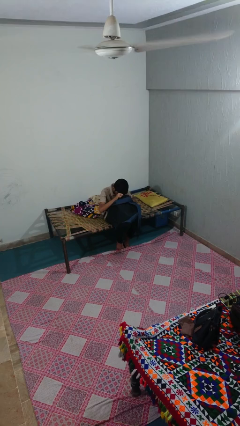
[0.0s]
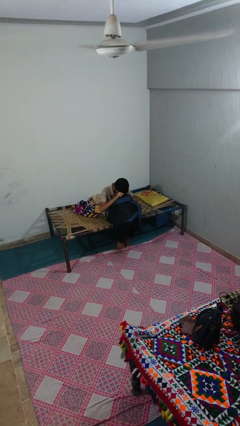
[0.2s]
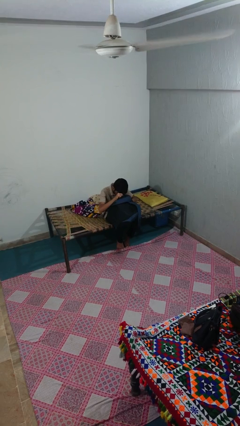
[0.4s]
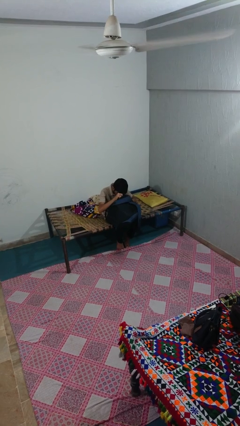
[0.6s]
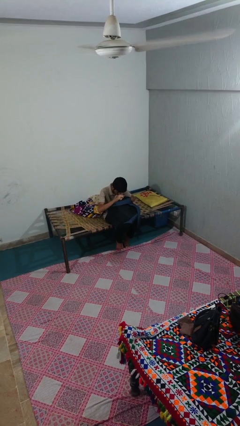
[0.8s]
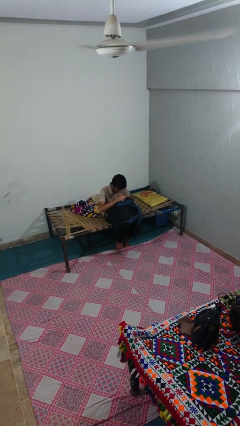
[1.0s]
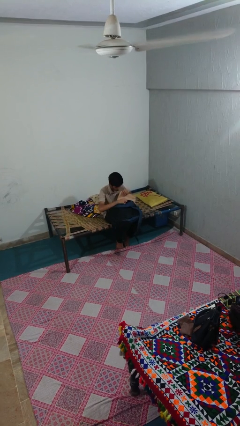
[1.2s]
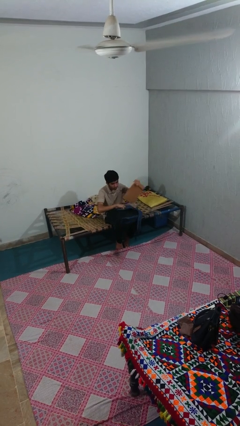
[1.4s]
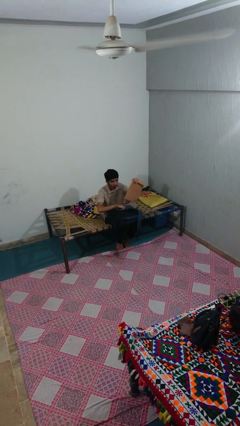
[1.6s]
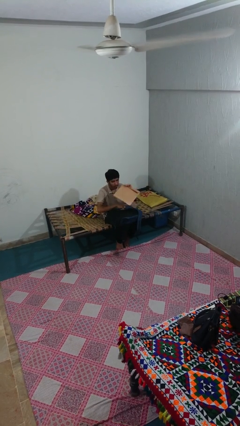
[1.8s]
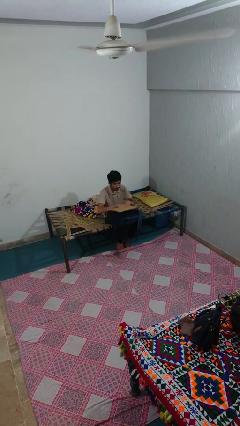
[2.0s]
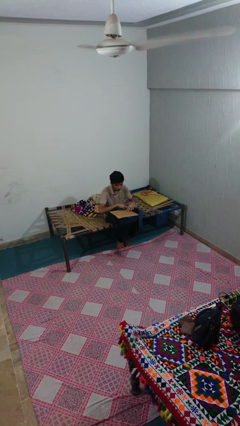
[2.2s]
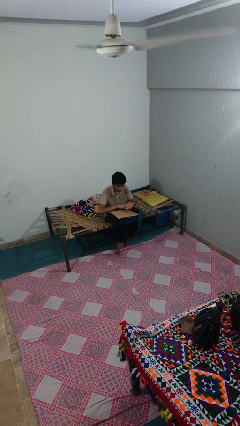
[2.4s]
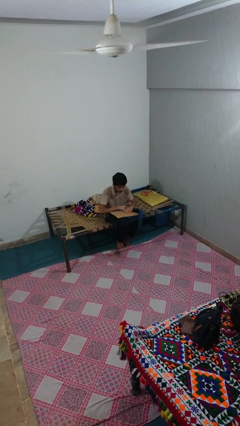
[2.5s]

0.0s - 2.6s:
person takes object from backpack

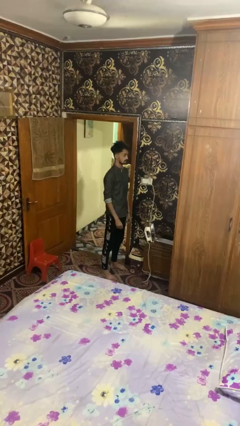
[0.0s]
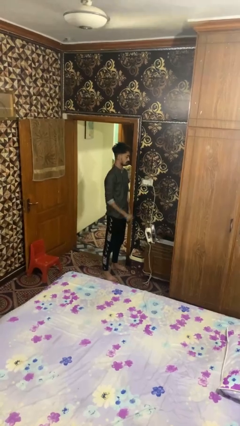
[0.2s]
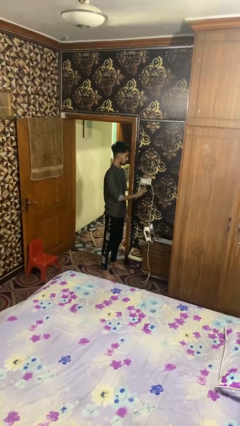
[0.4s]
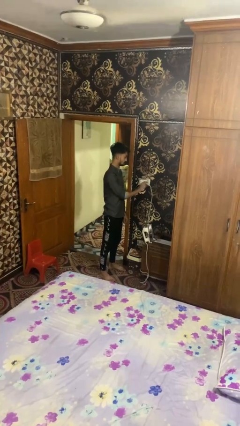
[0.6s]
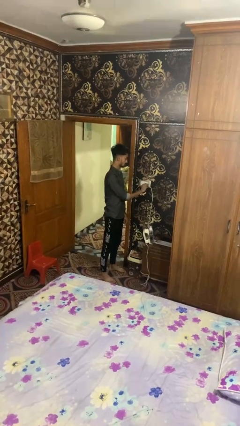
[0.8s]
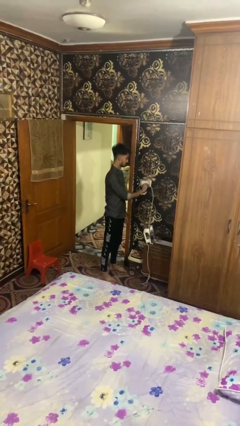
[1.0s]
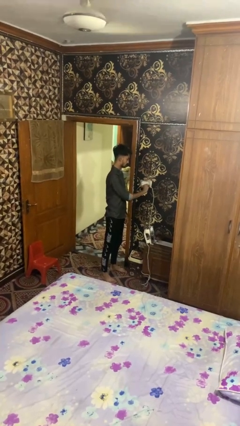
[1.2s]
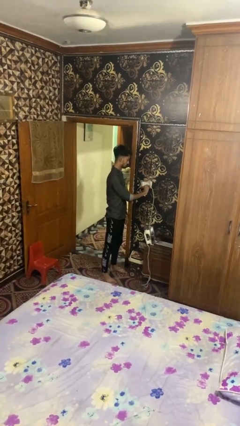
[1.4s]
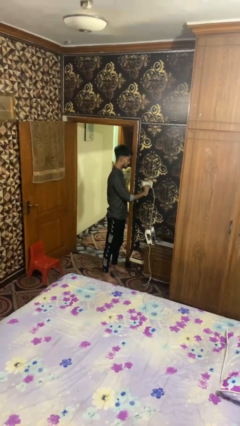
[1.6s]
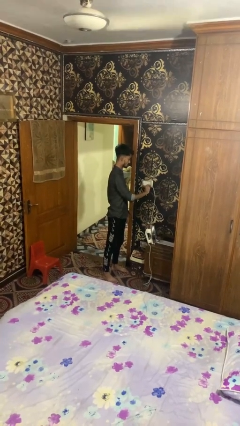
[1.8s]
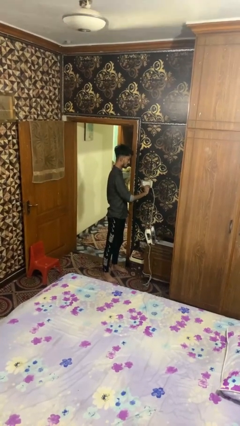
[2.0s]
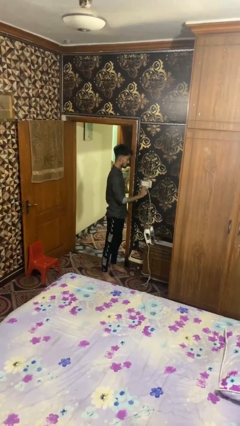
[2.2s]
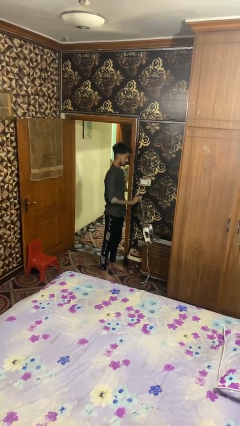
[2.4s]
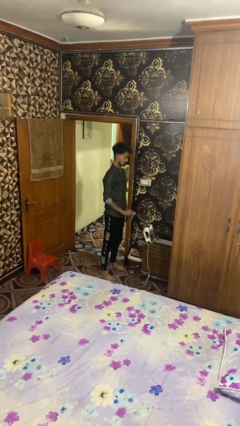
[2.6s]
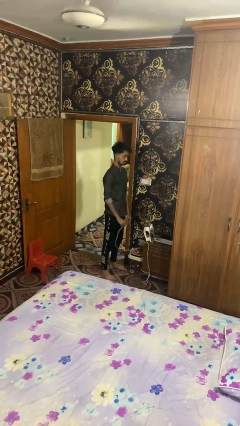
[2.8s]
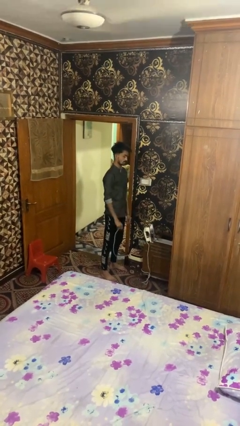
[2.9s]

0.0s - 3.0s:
person unplugs from electrical socket

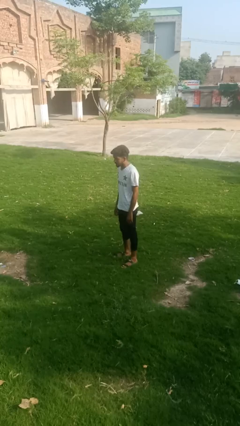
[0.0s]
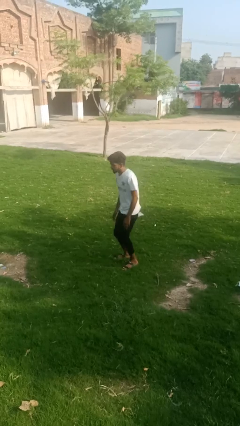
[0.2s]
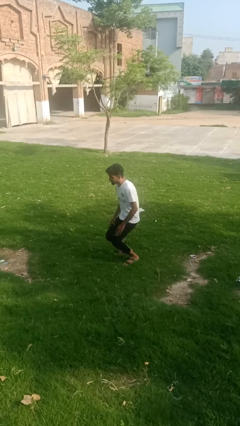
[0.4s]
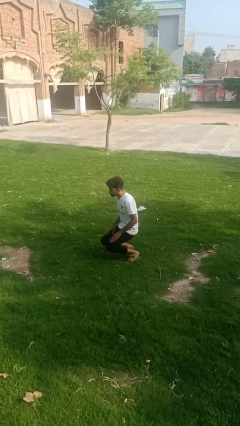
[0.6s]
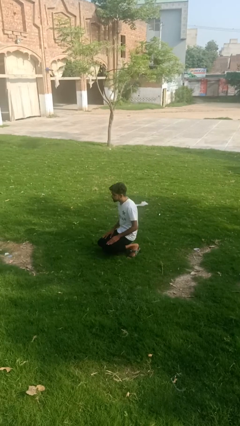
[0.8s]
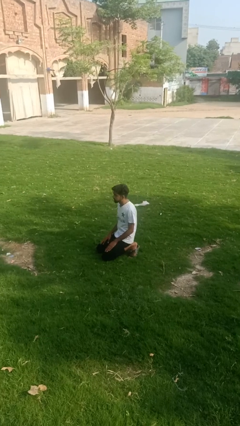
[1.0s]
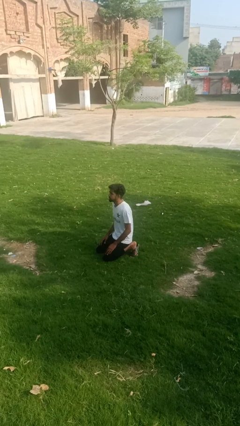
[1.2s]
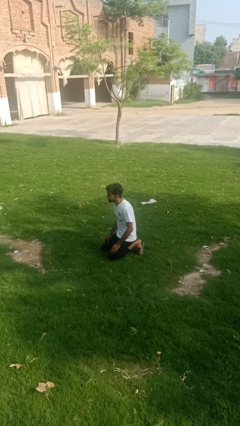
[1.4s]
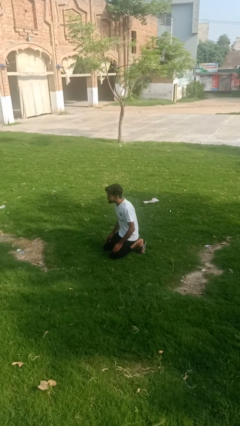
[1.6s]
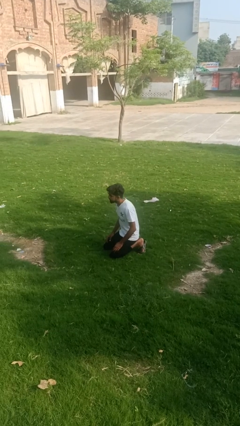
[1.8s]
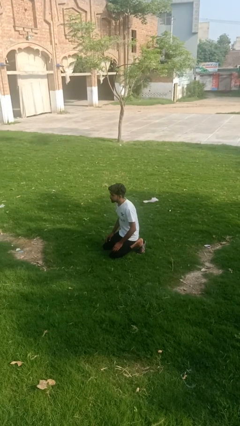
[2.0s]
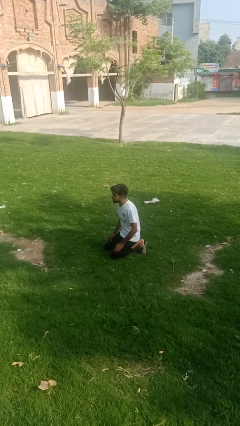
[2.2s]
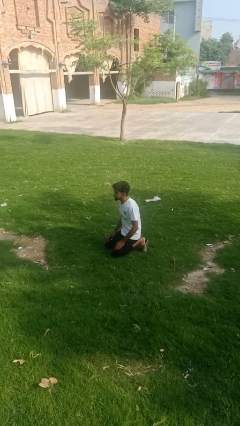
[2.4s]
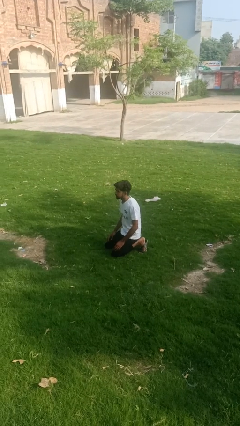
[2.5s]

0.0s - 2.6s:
person kneels

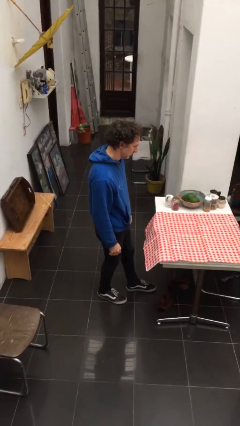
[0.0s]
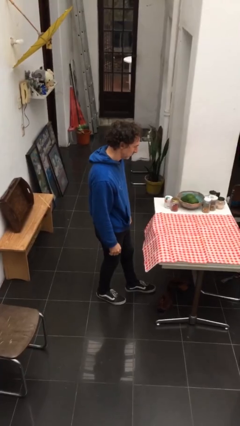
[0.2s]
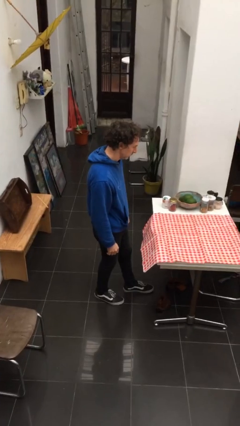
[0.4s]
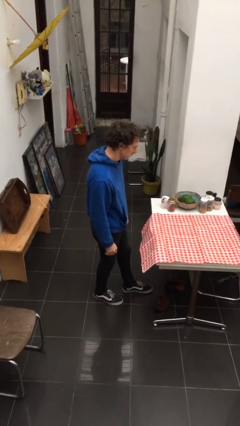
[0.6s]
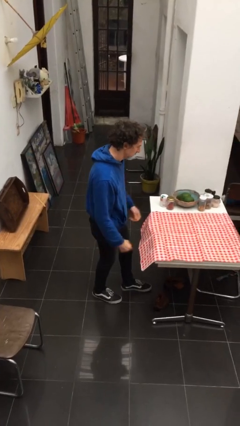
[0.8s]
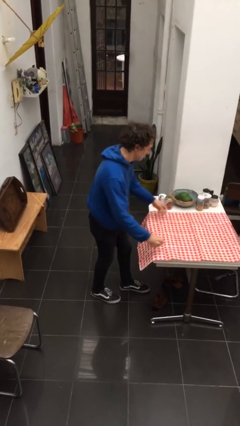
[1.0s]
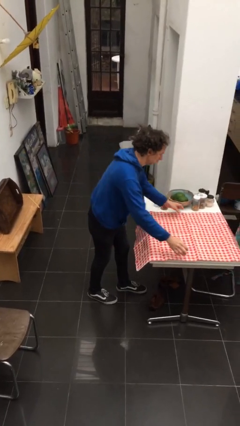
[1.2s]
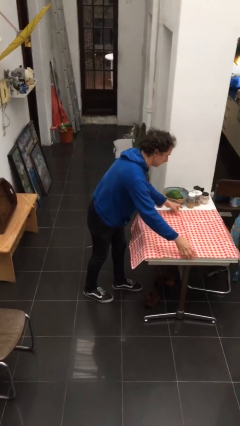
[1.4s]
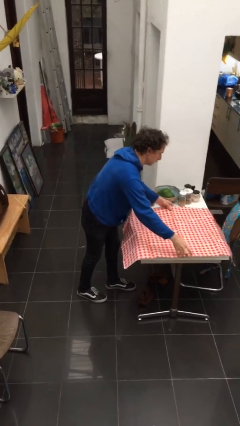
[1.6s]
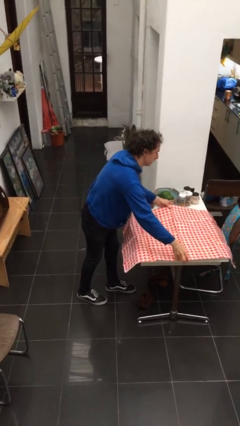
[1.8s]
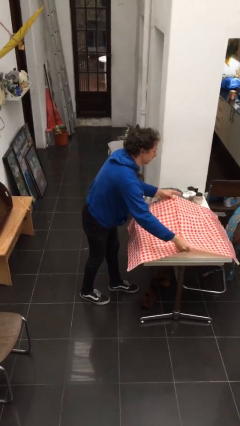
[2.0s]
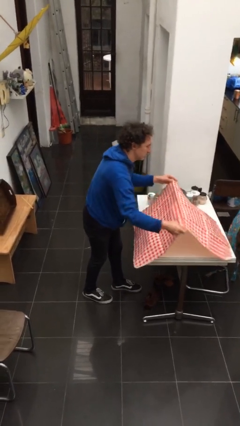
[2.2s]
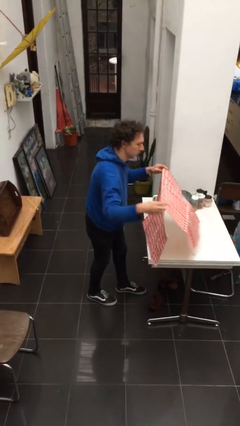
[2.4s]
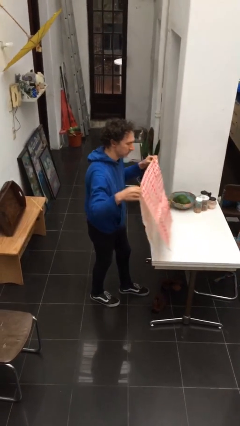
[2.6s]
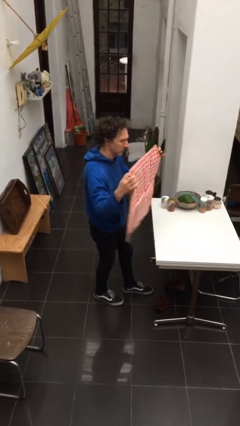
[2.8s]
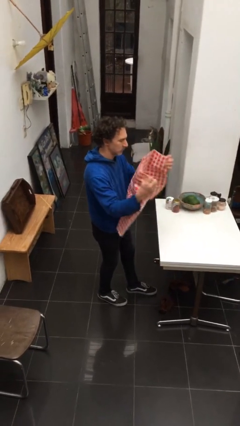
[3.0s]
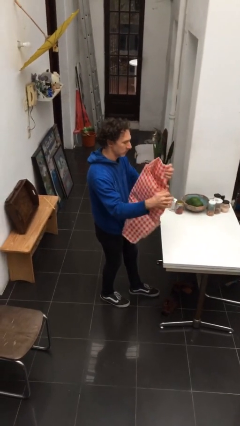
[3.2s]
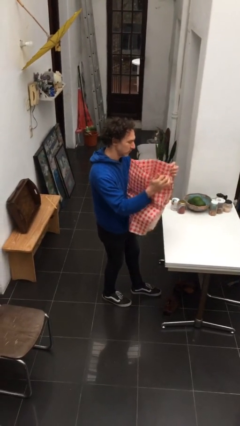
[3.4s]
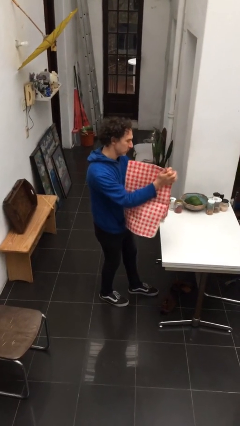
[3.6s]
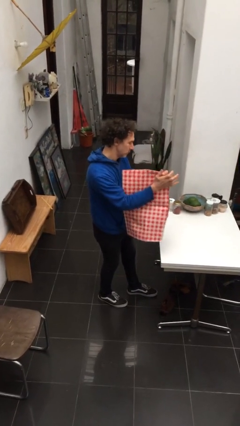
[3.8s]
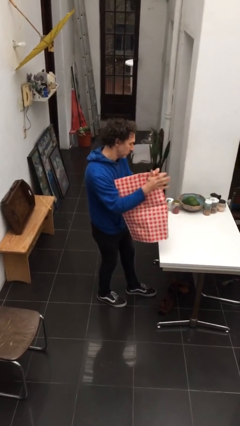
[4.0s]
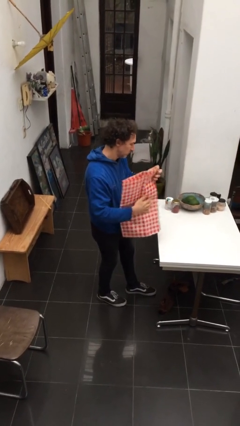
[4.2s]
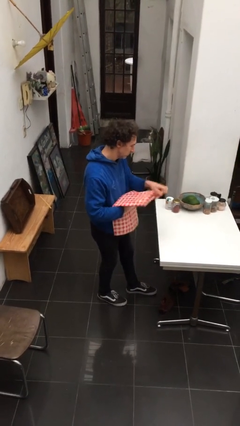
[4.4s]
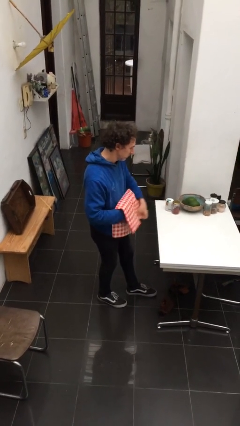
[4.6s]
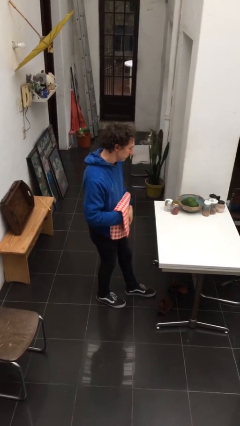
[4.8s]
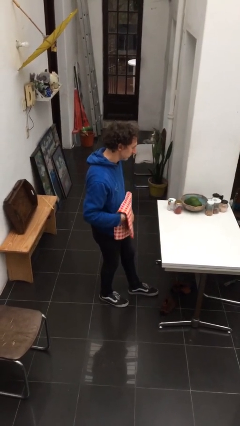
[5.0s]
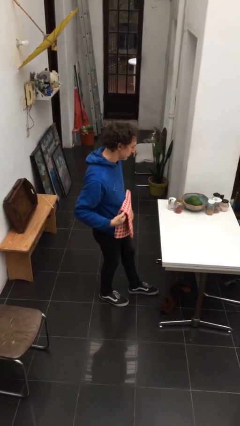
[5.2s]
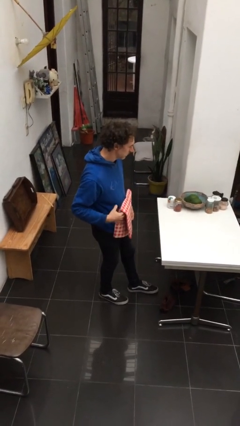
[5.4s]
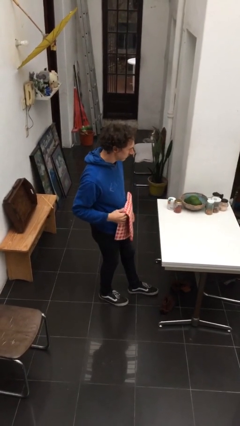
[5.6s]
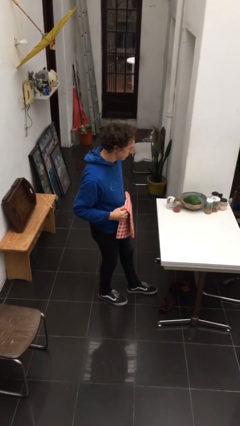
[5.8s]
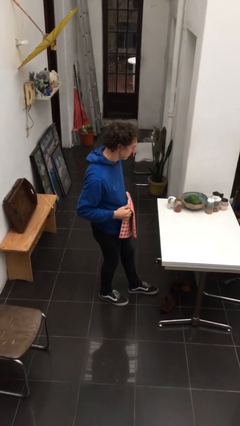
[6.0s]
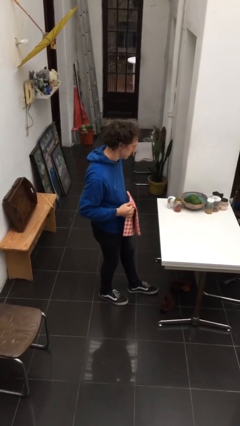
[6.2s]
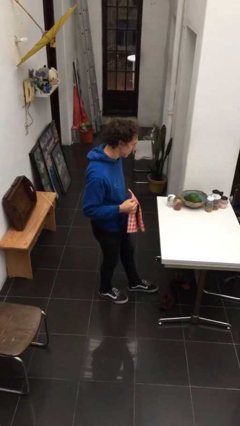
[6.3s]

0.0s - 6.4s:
person folds tablecloth

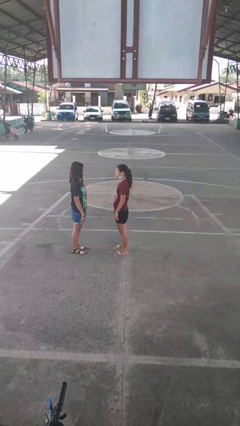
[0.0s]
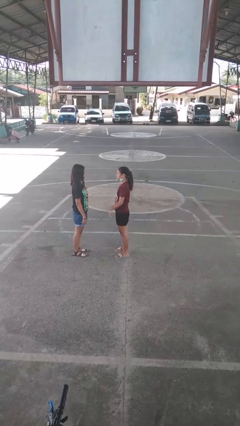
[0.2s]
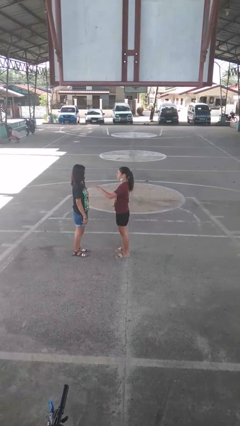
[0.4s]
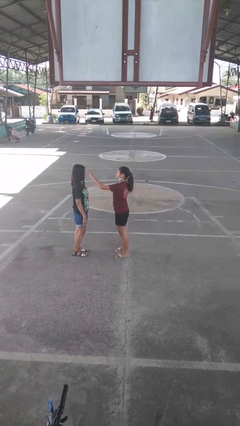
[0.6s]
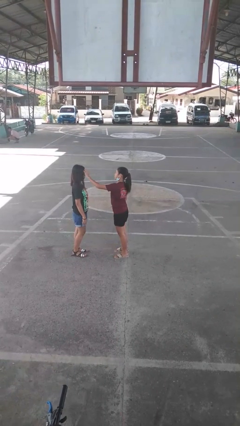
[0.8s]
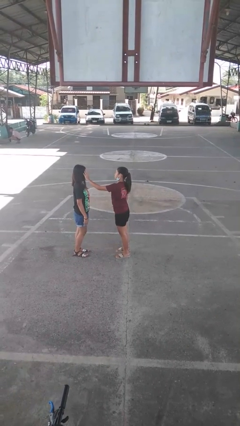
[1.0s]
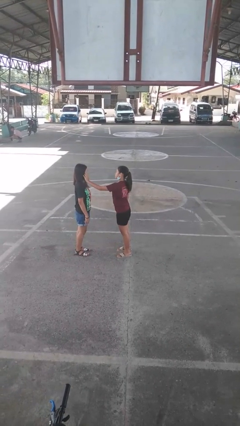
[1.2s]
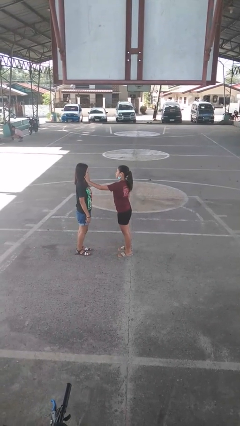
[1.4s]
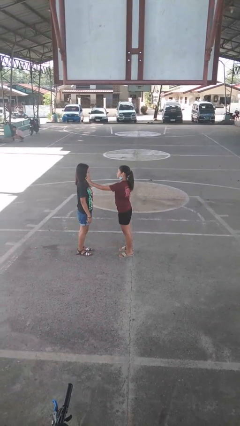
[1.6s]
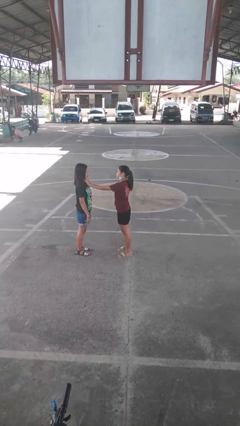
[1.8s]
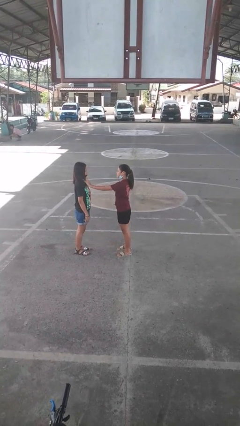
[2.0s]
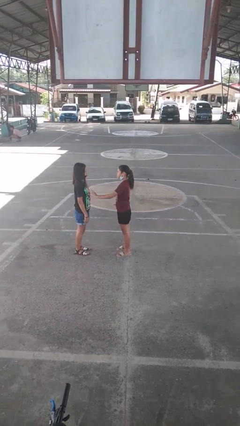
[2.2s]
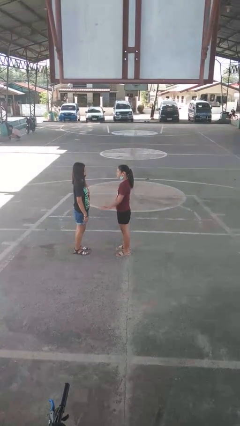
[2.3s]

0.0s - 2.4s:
person touches face of person

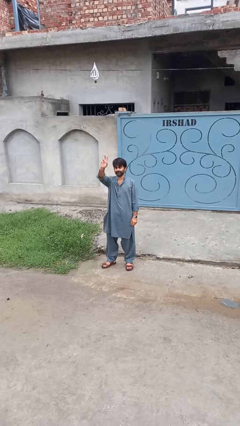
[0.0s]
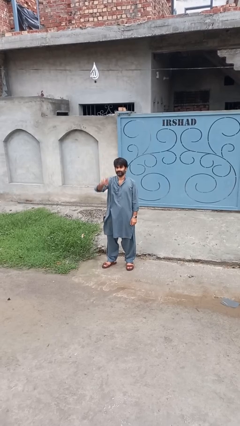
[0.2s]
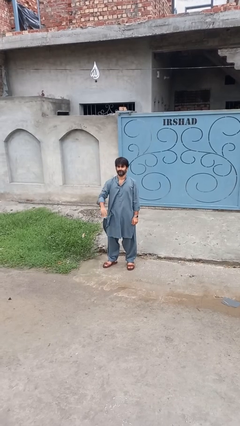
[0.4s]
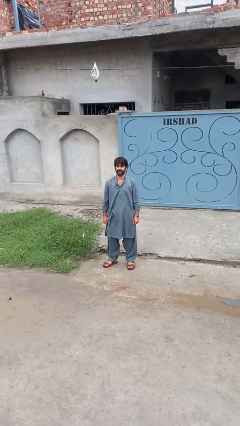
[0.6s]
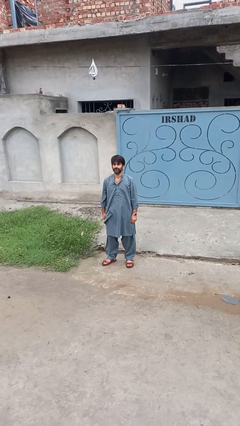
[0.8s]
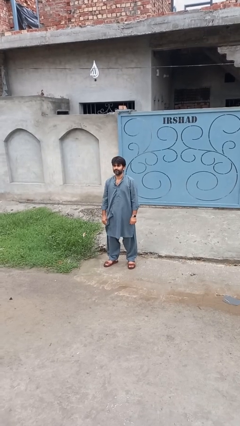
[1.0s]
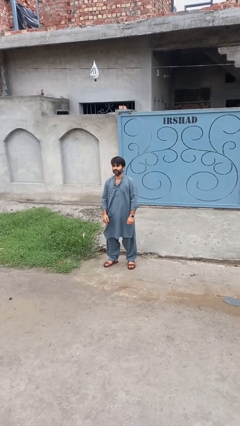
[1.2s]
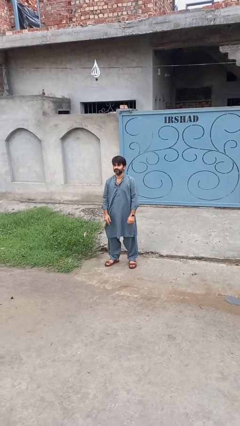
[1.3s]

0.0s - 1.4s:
person gestures lower hand
